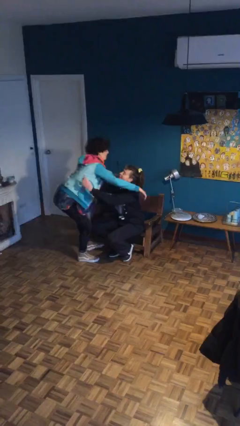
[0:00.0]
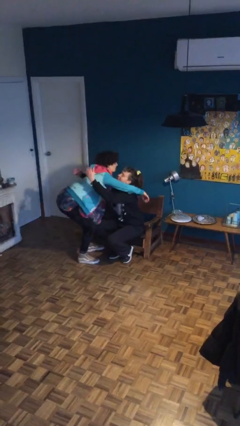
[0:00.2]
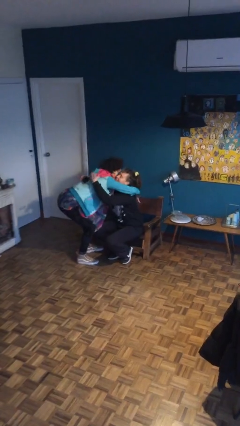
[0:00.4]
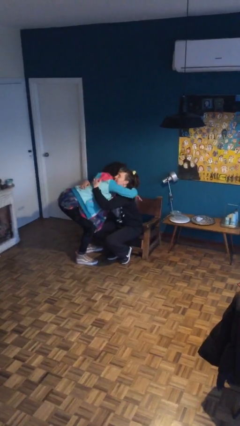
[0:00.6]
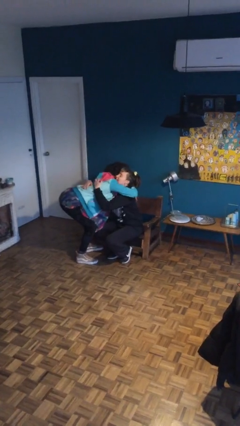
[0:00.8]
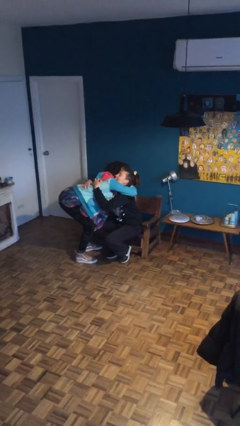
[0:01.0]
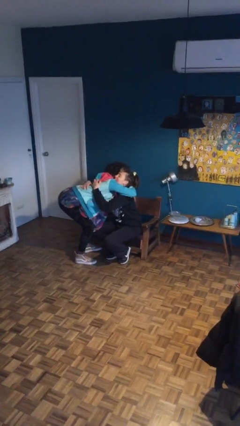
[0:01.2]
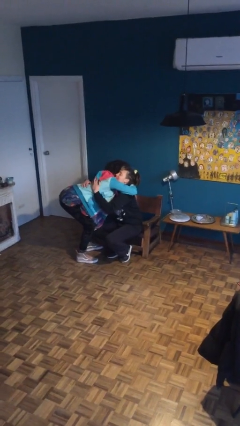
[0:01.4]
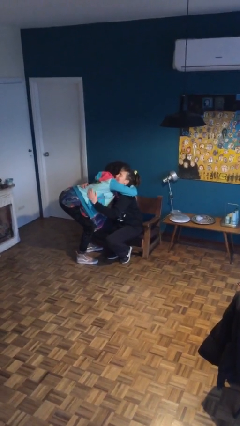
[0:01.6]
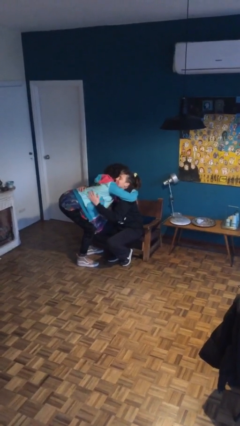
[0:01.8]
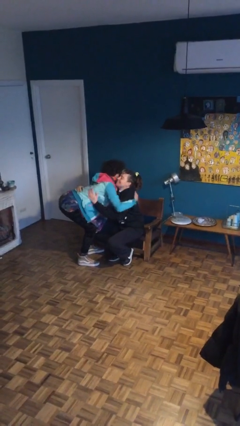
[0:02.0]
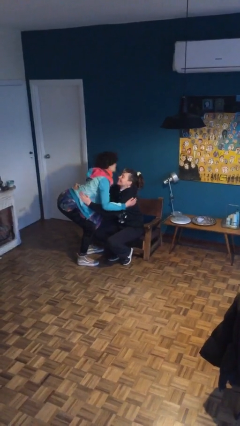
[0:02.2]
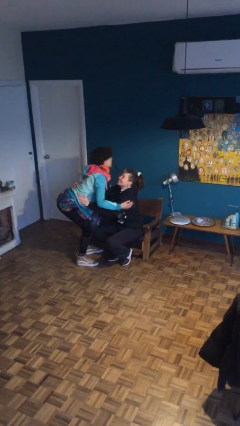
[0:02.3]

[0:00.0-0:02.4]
person embraces person

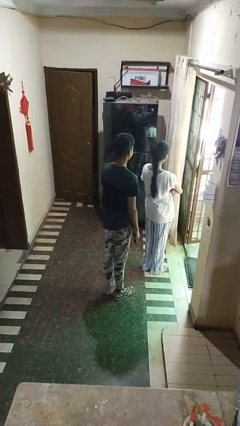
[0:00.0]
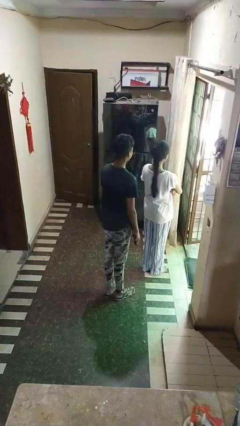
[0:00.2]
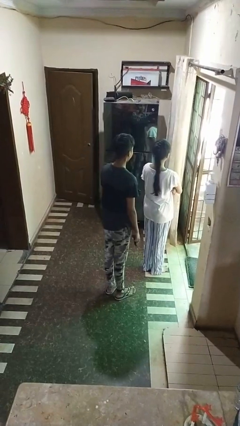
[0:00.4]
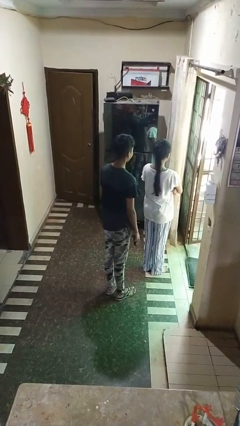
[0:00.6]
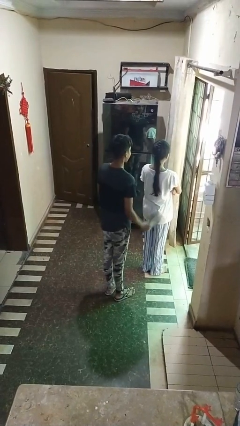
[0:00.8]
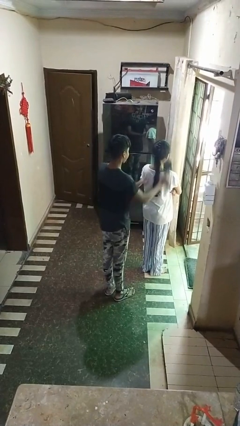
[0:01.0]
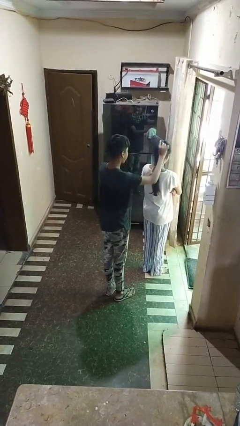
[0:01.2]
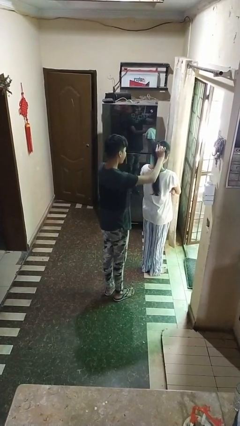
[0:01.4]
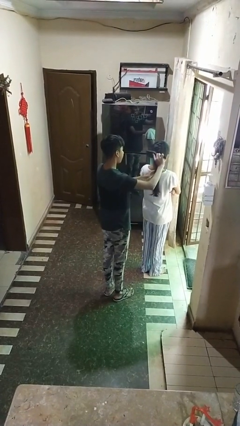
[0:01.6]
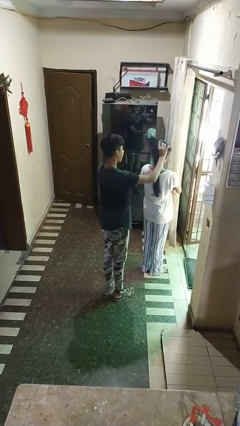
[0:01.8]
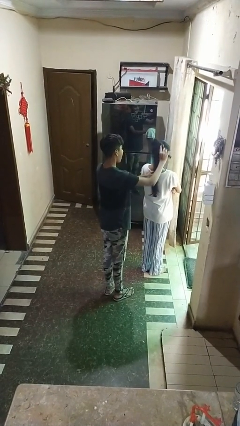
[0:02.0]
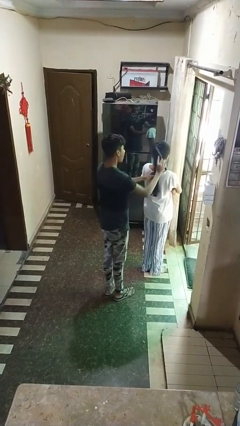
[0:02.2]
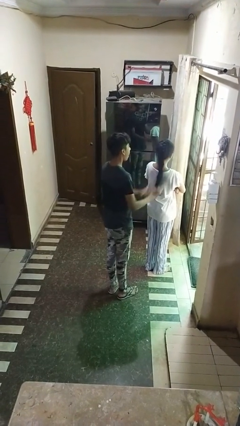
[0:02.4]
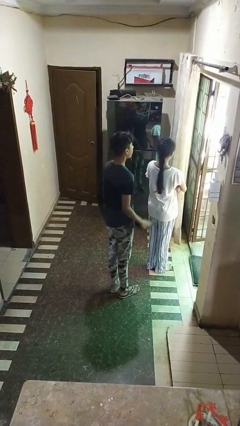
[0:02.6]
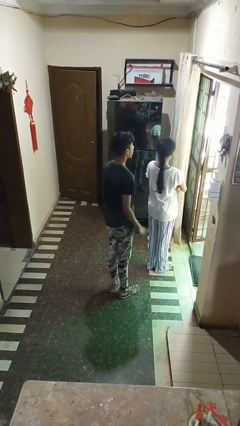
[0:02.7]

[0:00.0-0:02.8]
person brushes hair of person

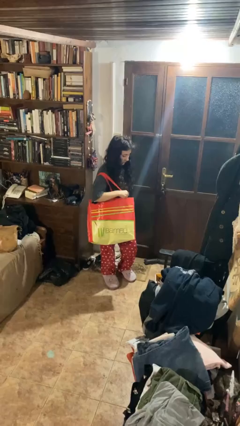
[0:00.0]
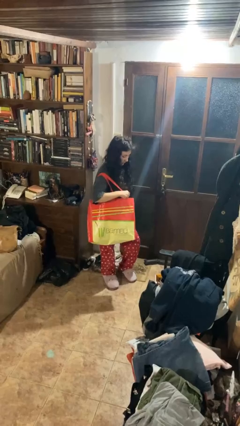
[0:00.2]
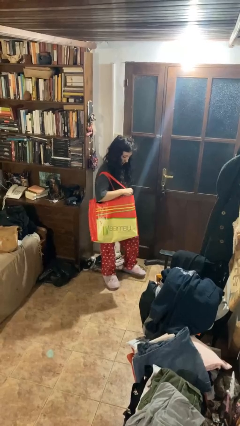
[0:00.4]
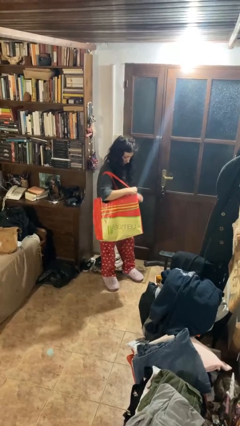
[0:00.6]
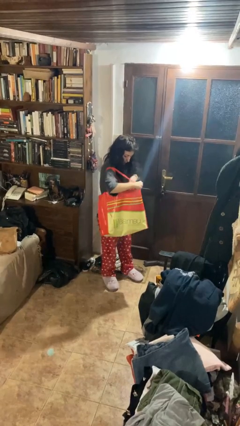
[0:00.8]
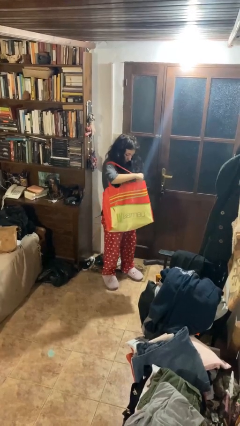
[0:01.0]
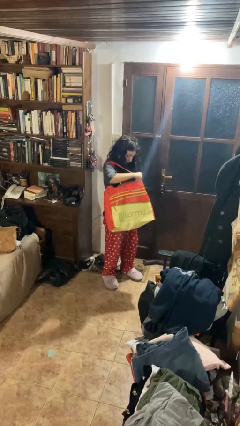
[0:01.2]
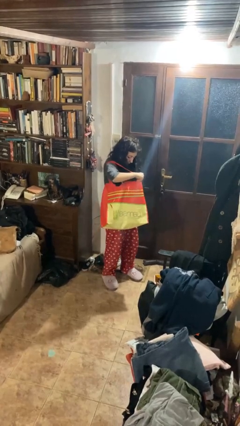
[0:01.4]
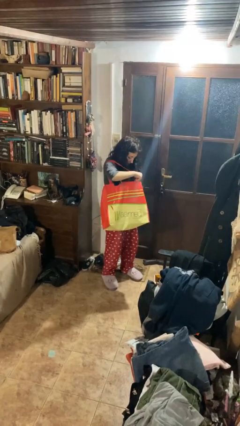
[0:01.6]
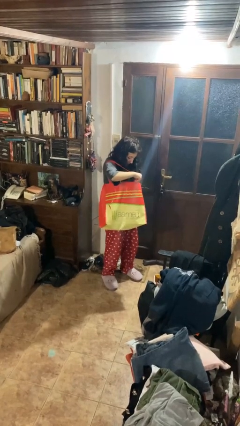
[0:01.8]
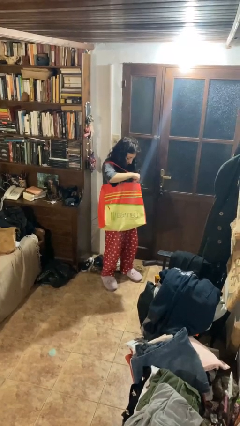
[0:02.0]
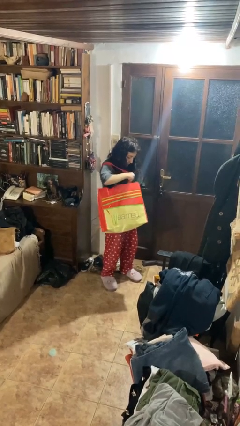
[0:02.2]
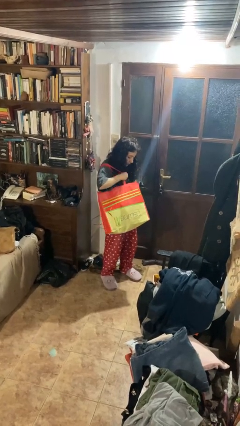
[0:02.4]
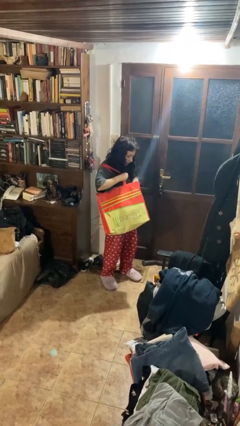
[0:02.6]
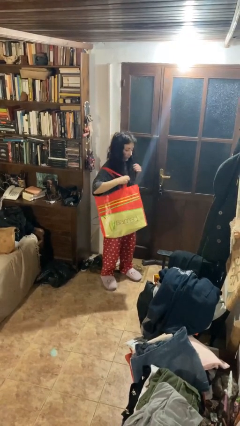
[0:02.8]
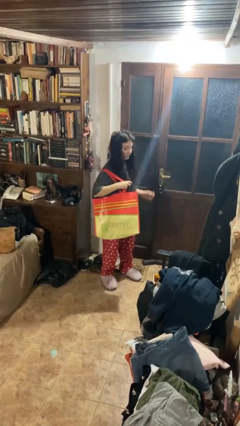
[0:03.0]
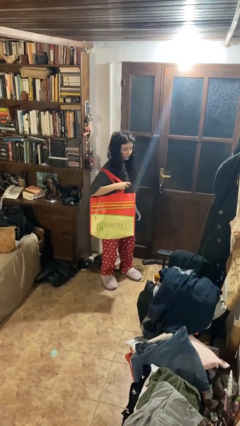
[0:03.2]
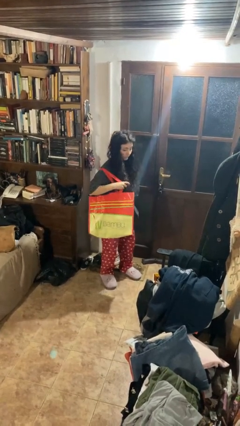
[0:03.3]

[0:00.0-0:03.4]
person searches in bag

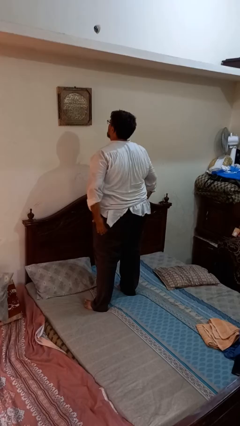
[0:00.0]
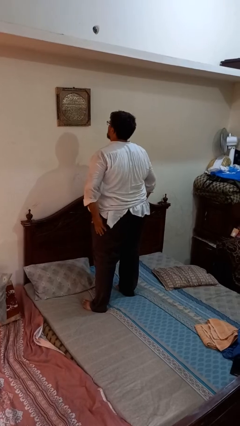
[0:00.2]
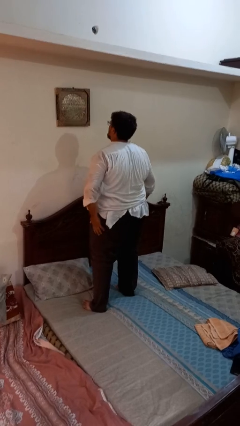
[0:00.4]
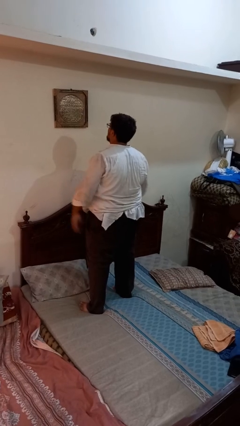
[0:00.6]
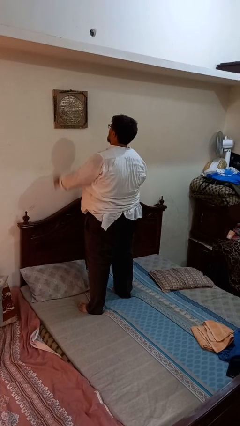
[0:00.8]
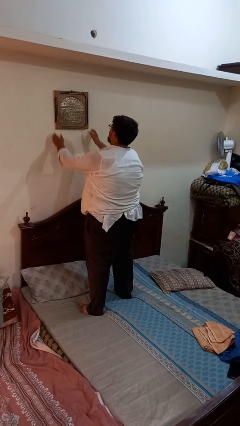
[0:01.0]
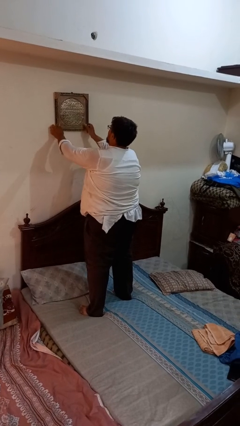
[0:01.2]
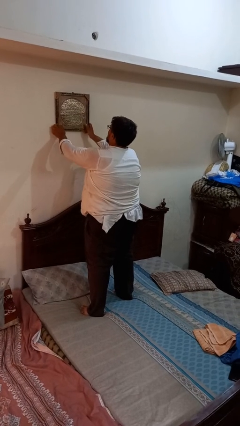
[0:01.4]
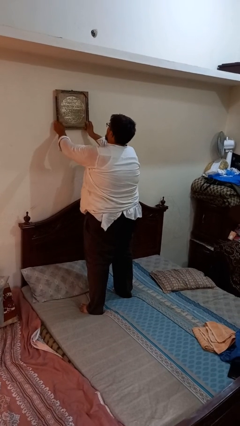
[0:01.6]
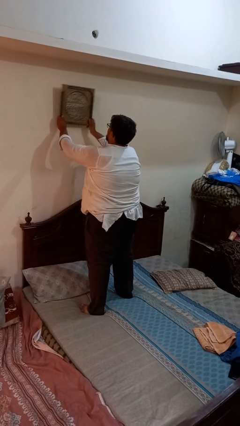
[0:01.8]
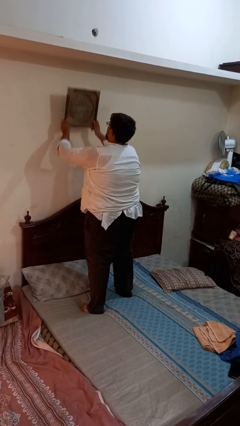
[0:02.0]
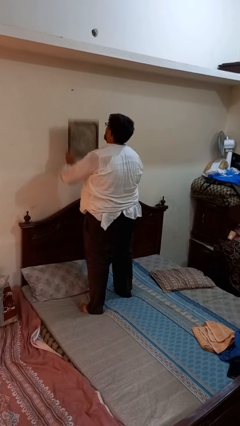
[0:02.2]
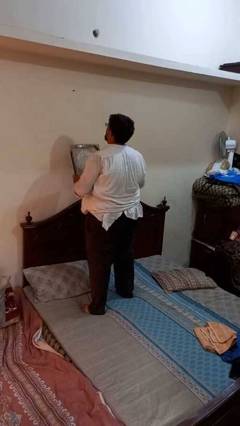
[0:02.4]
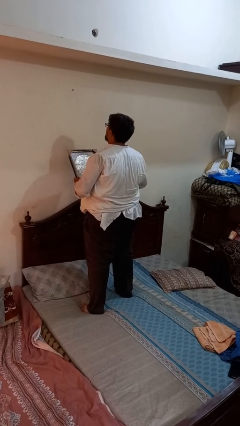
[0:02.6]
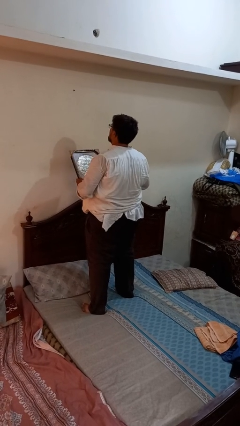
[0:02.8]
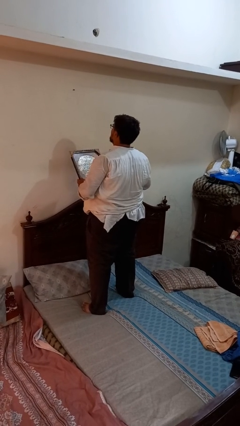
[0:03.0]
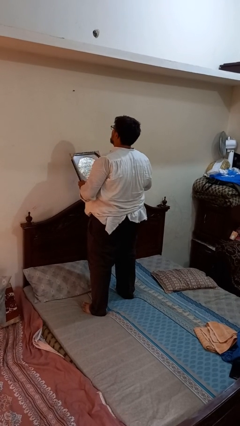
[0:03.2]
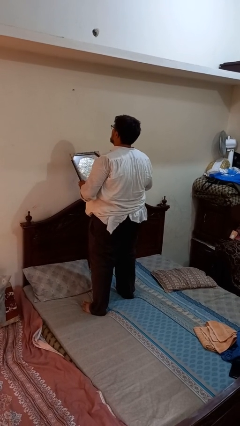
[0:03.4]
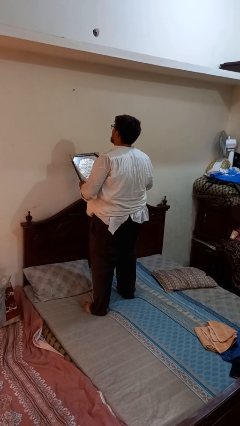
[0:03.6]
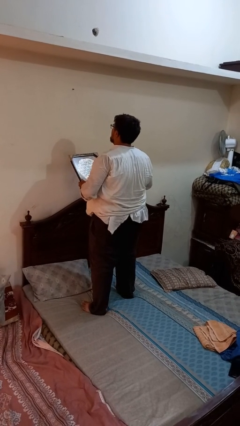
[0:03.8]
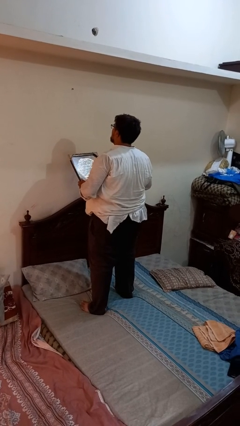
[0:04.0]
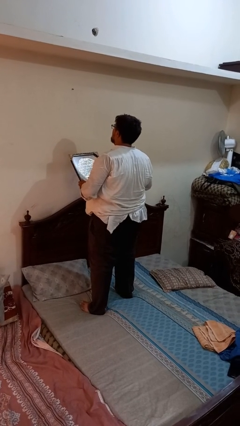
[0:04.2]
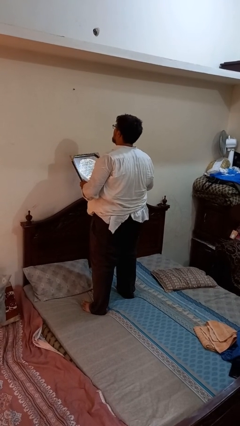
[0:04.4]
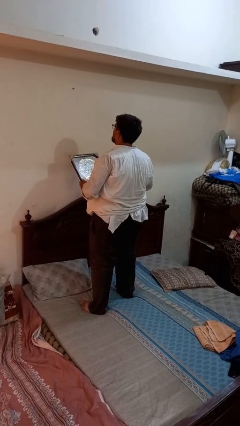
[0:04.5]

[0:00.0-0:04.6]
person takes down picture frame

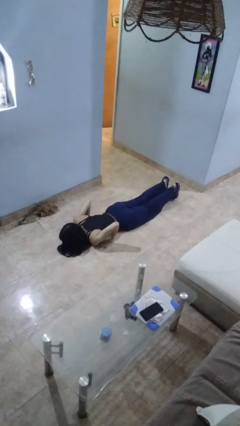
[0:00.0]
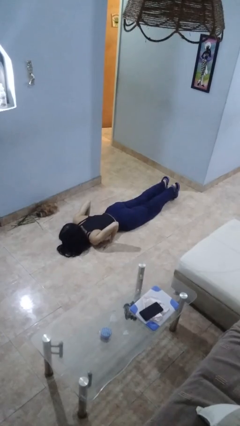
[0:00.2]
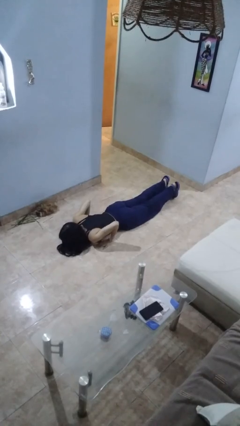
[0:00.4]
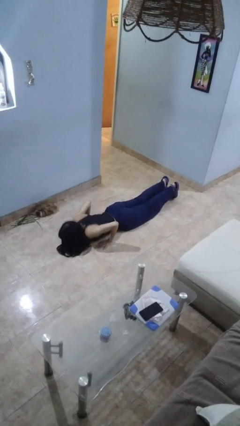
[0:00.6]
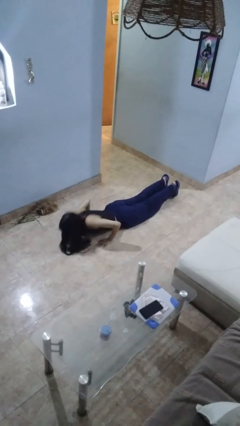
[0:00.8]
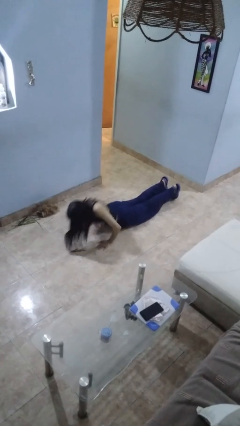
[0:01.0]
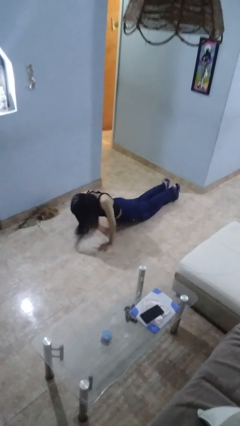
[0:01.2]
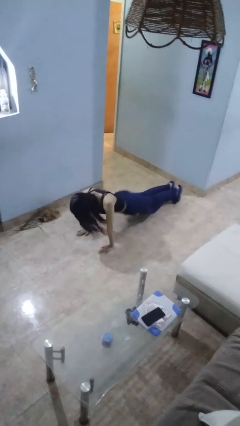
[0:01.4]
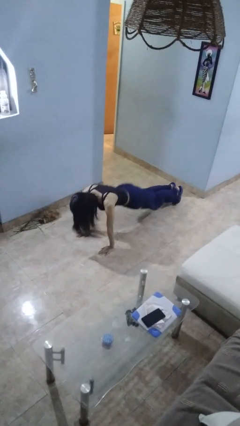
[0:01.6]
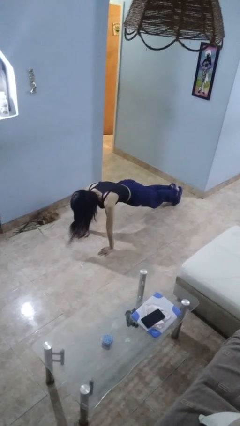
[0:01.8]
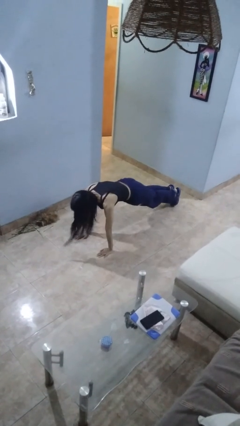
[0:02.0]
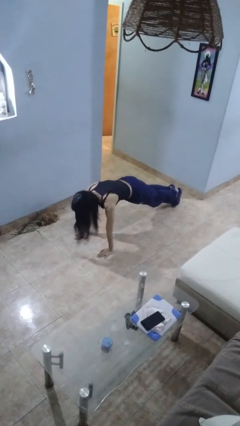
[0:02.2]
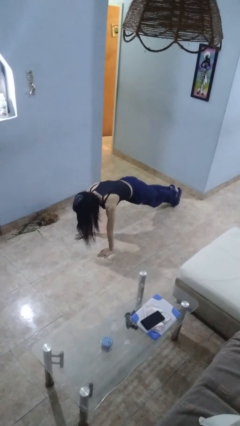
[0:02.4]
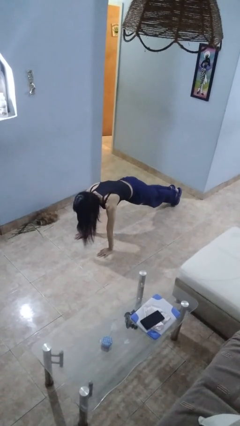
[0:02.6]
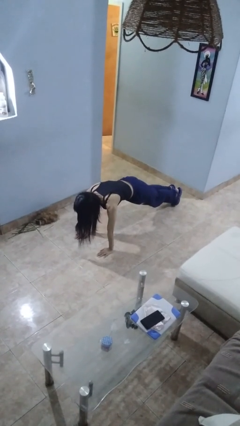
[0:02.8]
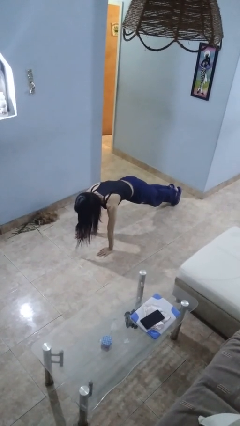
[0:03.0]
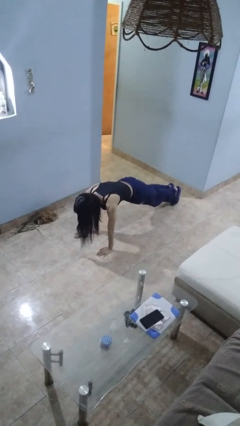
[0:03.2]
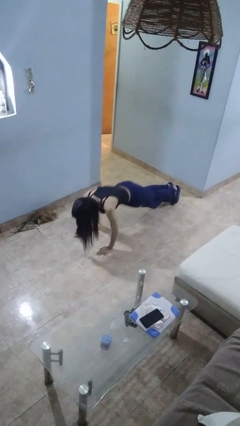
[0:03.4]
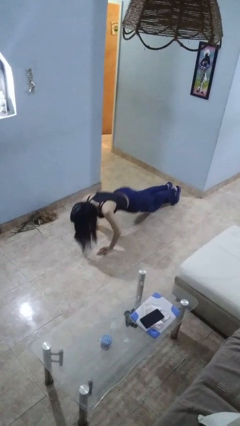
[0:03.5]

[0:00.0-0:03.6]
person exercises with pushup

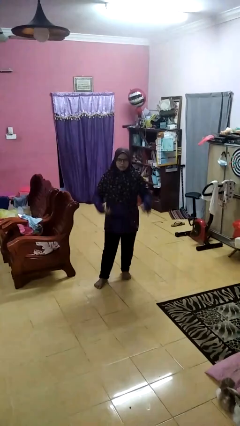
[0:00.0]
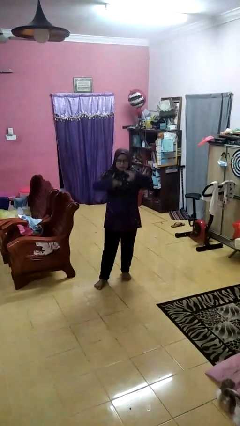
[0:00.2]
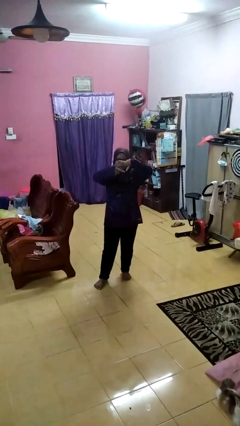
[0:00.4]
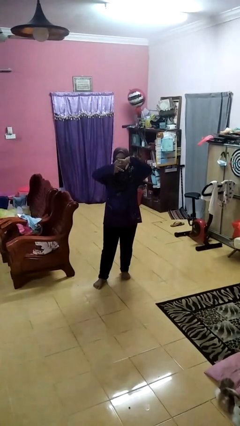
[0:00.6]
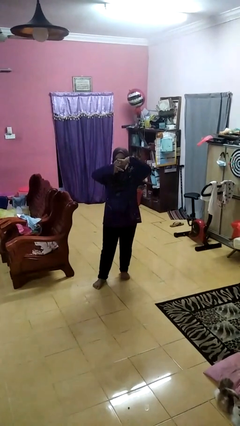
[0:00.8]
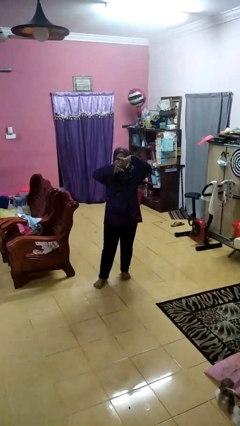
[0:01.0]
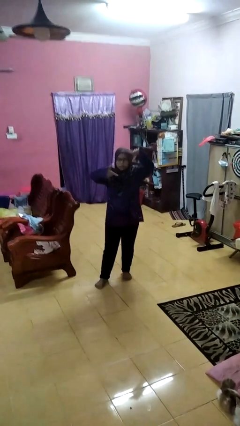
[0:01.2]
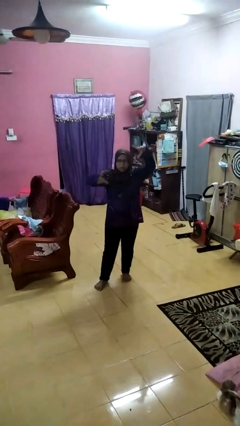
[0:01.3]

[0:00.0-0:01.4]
person gestures zoom in
